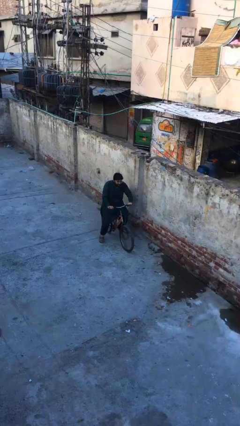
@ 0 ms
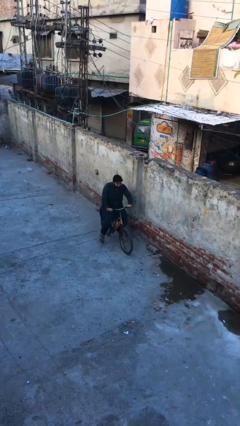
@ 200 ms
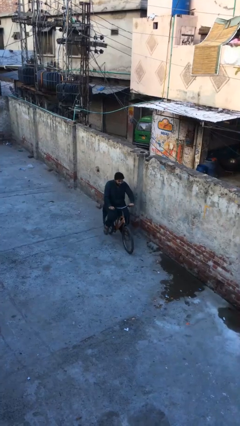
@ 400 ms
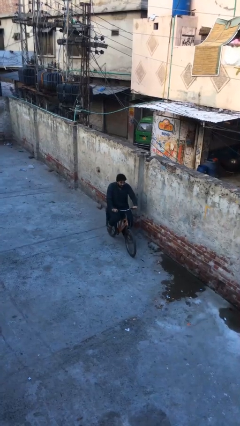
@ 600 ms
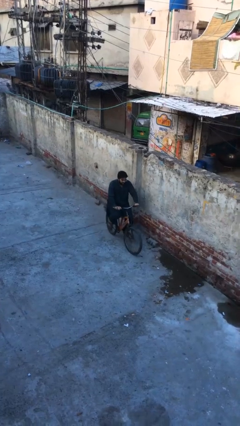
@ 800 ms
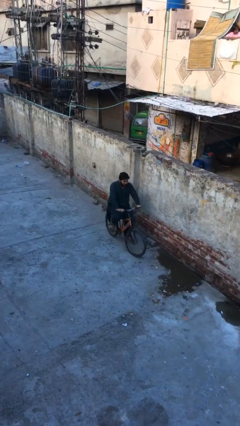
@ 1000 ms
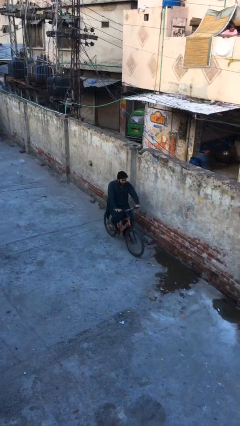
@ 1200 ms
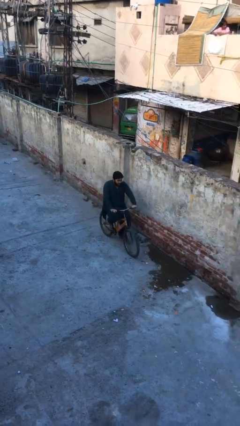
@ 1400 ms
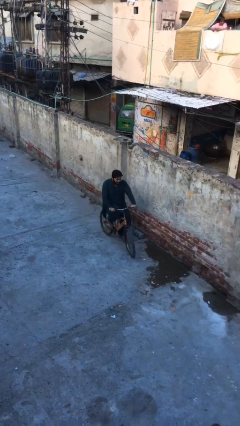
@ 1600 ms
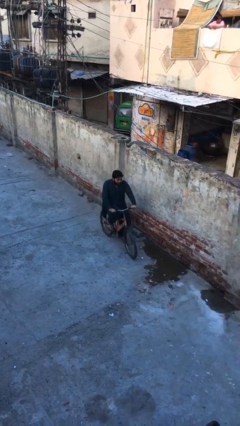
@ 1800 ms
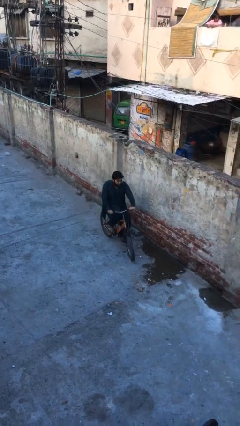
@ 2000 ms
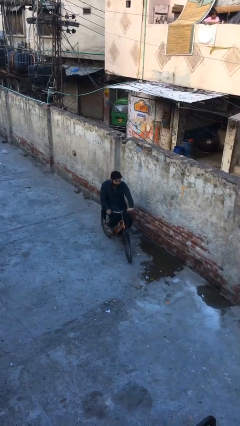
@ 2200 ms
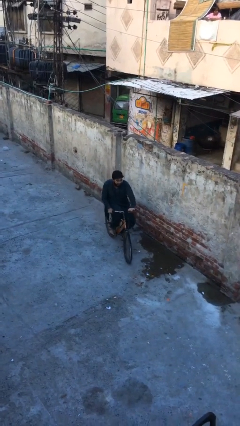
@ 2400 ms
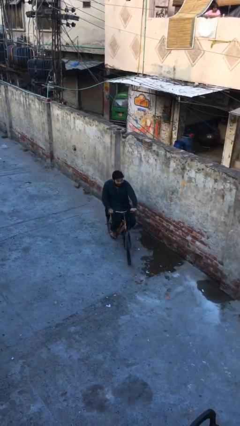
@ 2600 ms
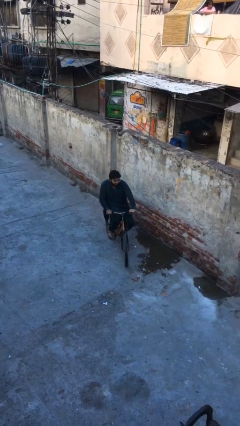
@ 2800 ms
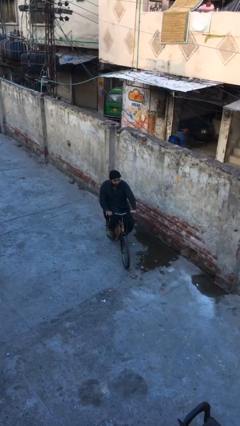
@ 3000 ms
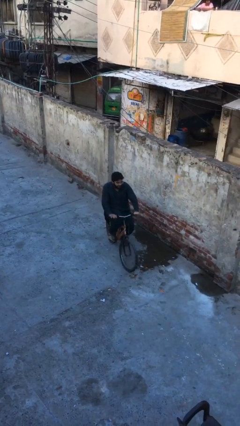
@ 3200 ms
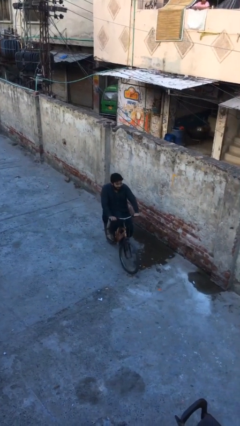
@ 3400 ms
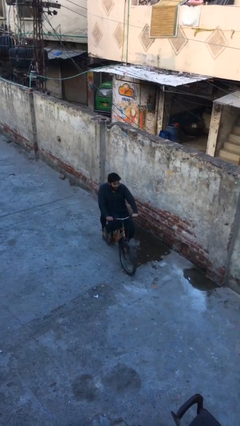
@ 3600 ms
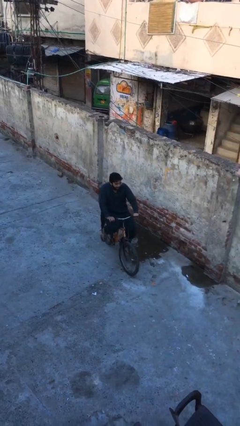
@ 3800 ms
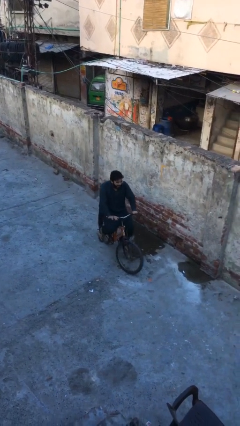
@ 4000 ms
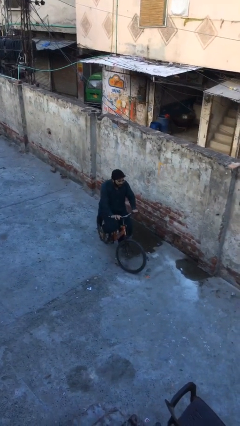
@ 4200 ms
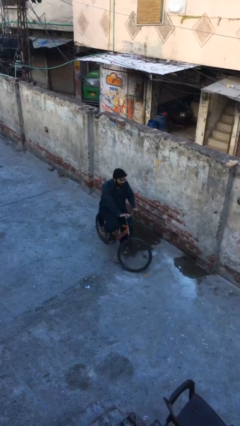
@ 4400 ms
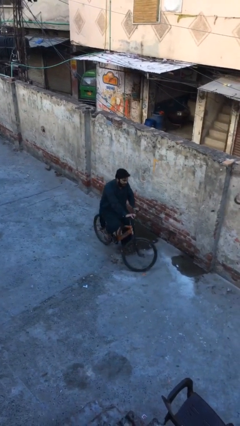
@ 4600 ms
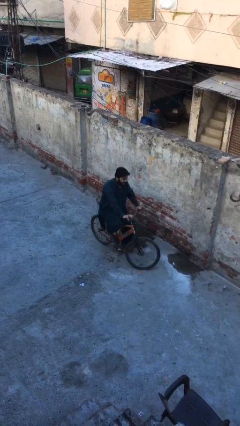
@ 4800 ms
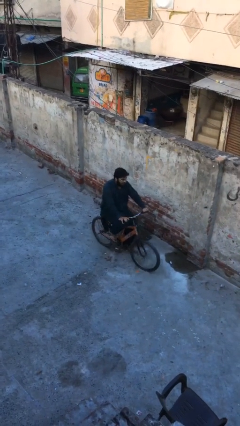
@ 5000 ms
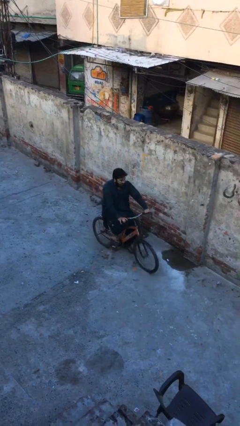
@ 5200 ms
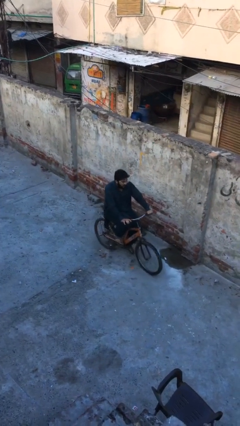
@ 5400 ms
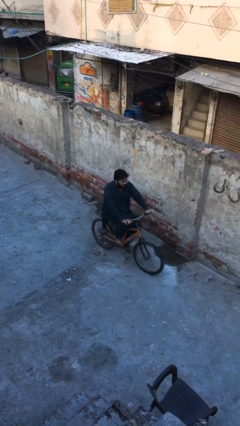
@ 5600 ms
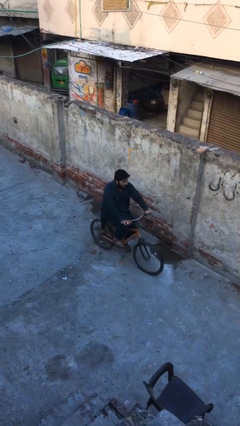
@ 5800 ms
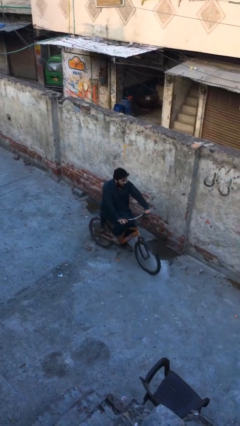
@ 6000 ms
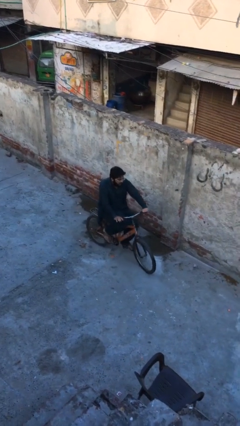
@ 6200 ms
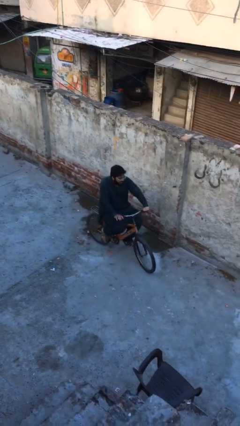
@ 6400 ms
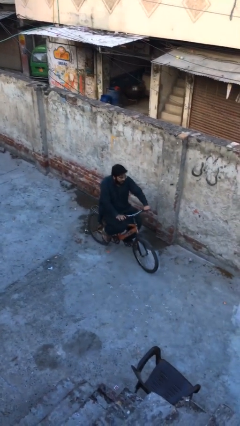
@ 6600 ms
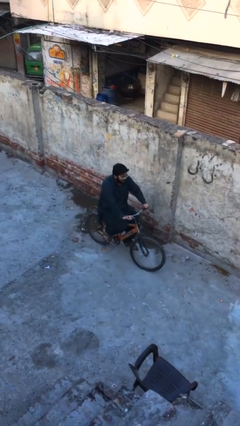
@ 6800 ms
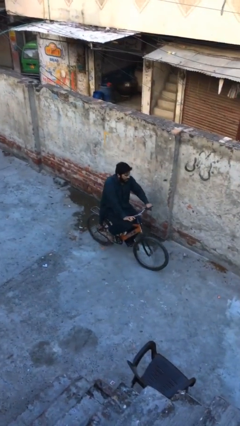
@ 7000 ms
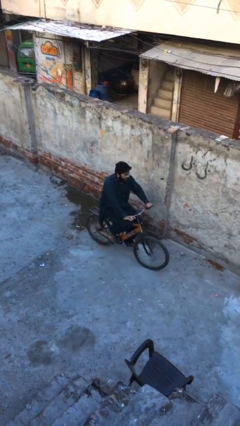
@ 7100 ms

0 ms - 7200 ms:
person rides bicycle

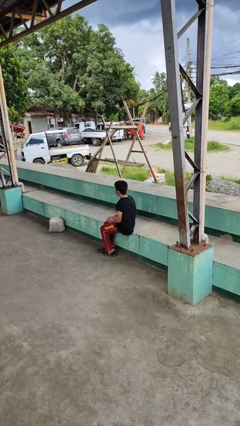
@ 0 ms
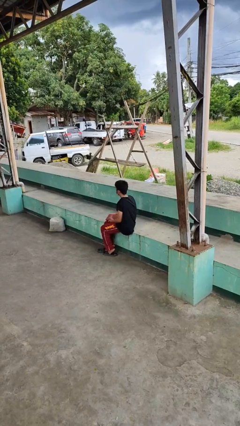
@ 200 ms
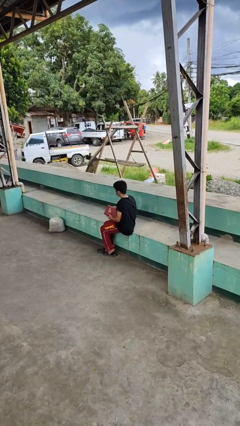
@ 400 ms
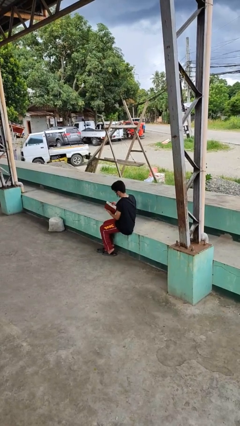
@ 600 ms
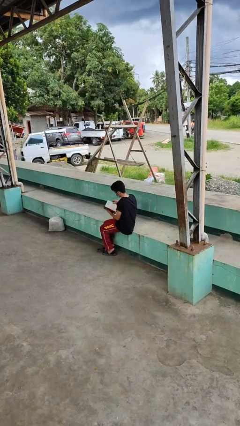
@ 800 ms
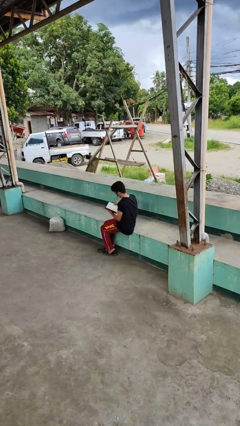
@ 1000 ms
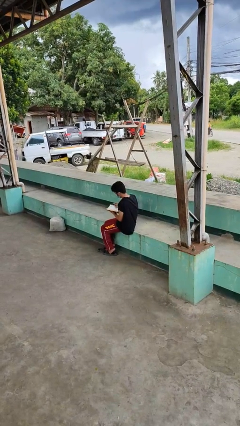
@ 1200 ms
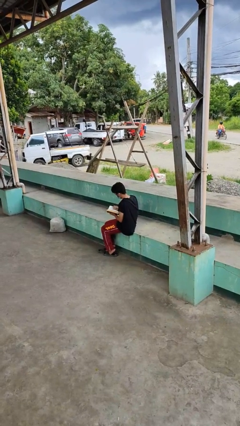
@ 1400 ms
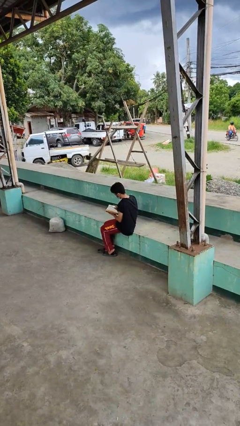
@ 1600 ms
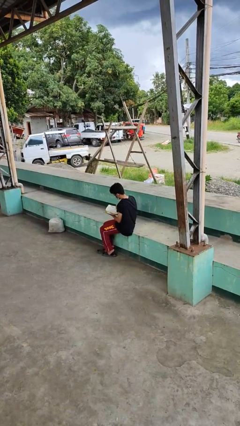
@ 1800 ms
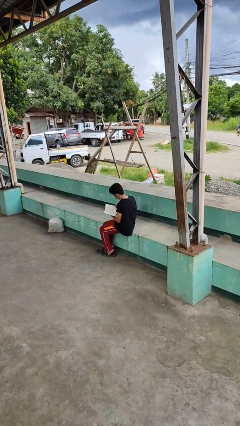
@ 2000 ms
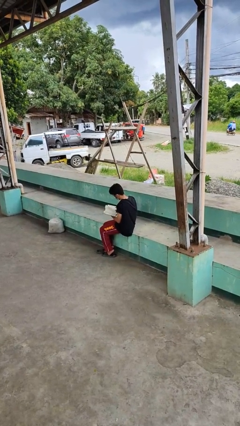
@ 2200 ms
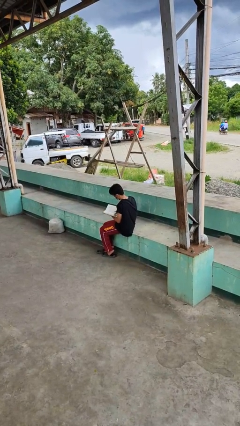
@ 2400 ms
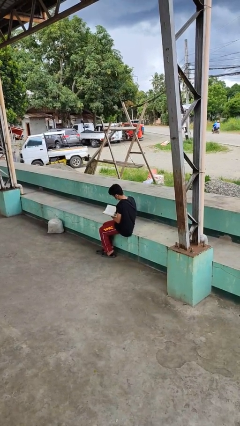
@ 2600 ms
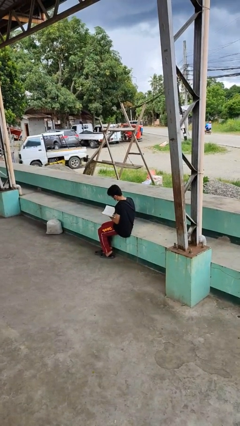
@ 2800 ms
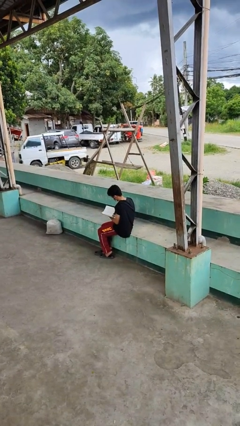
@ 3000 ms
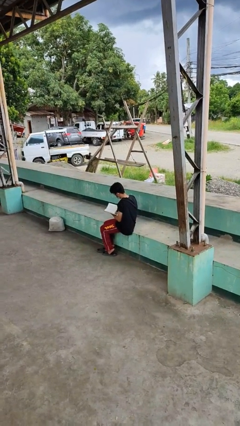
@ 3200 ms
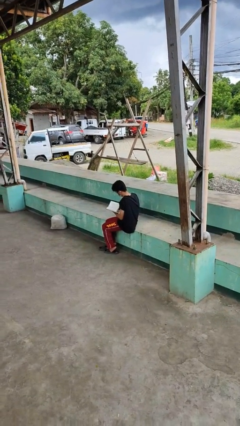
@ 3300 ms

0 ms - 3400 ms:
person reads book

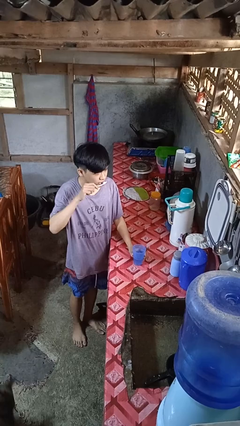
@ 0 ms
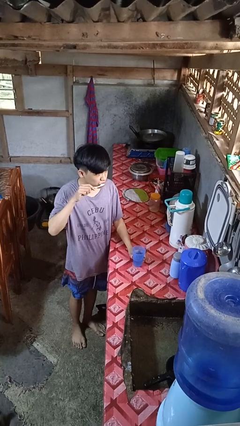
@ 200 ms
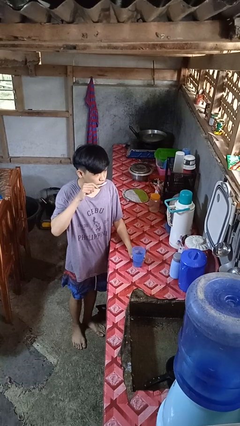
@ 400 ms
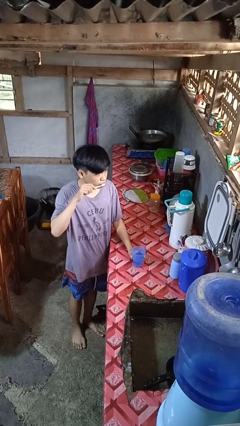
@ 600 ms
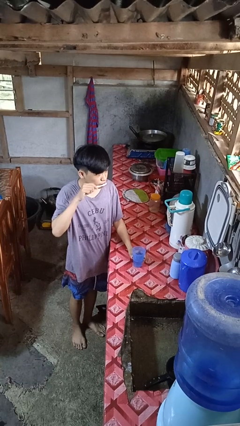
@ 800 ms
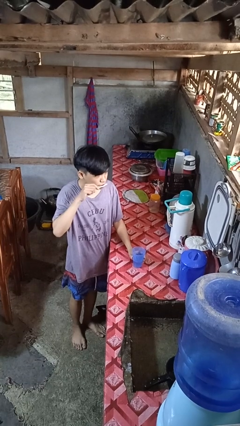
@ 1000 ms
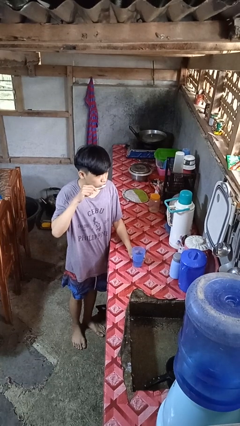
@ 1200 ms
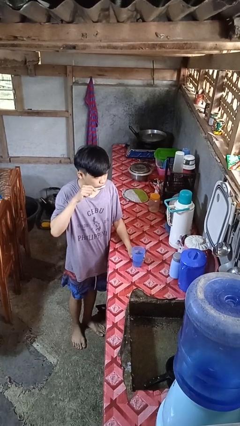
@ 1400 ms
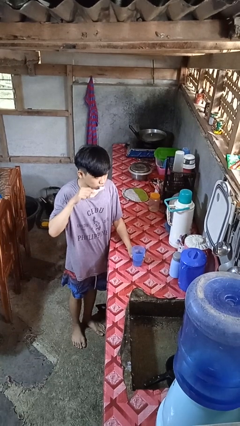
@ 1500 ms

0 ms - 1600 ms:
person brushes teeth

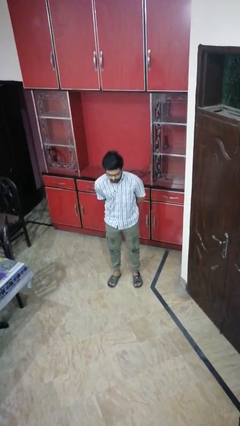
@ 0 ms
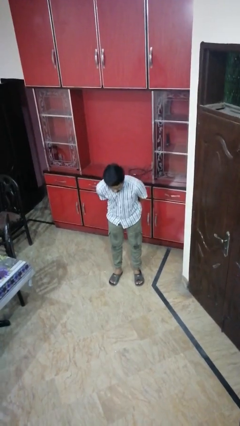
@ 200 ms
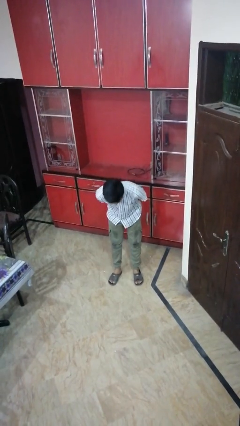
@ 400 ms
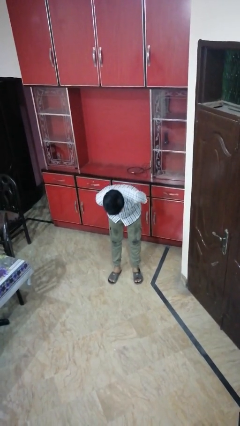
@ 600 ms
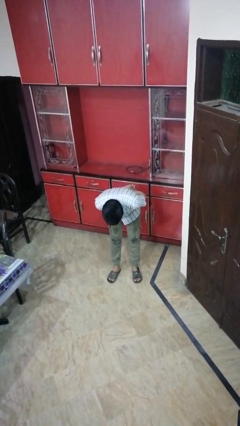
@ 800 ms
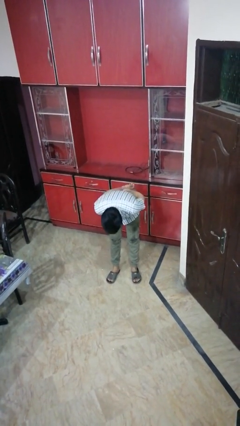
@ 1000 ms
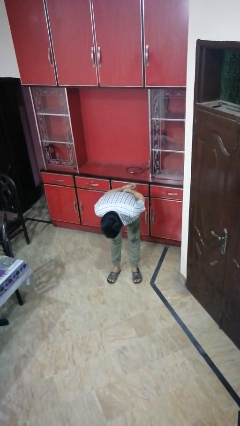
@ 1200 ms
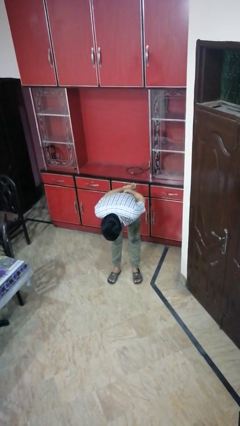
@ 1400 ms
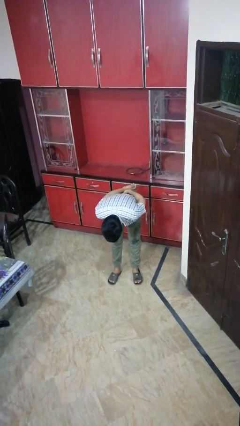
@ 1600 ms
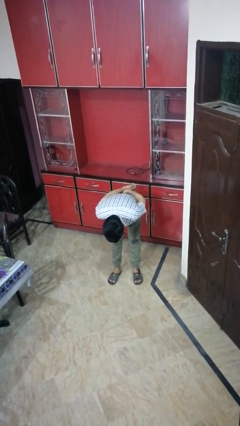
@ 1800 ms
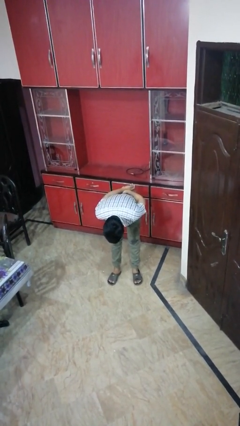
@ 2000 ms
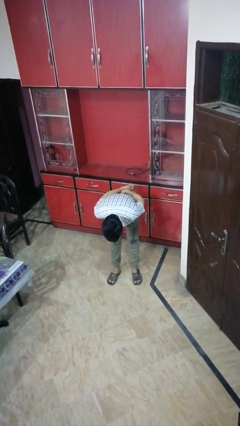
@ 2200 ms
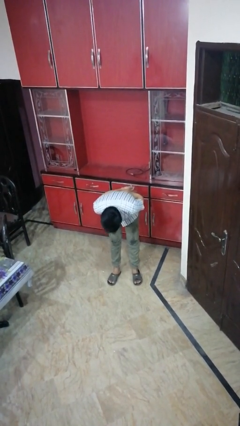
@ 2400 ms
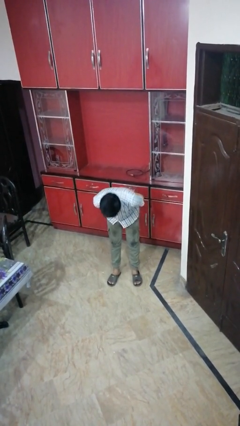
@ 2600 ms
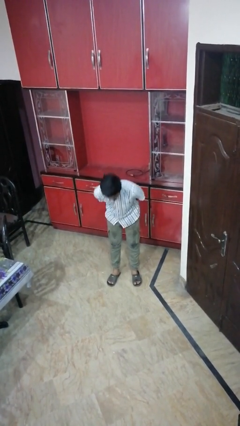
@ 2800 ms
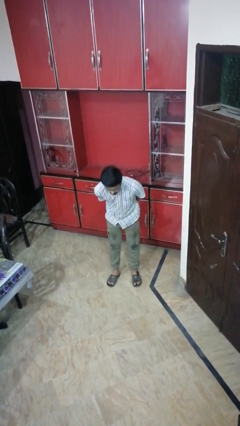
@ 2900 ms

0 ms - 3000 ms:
person bows

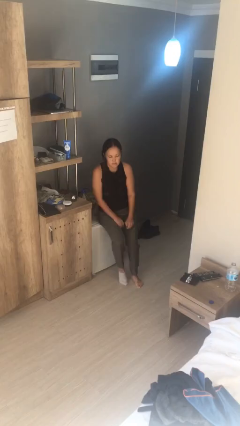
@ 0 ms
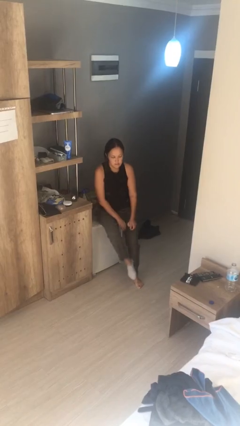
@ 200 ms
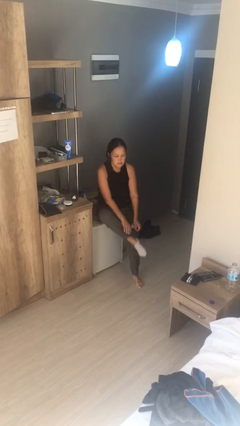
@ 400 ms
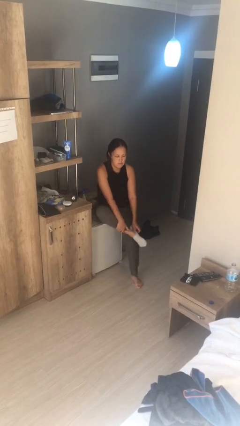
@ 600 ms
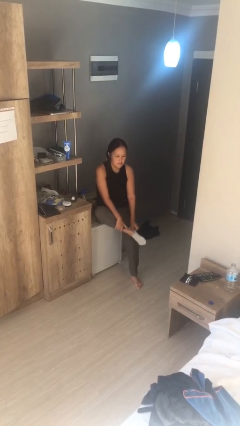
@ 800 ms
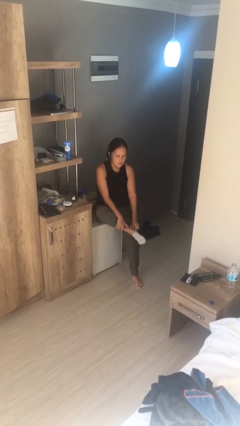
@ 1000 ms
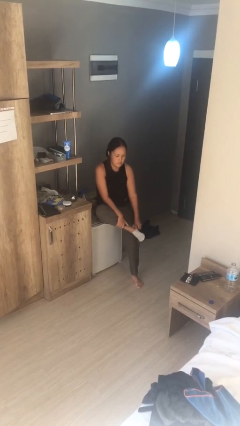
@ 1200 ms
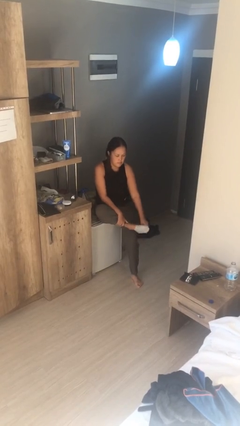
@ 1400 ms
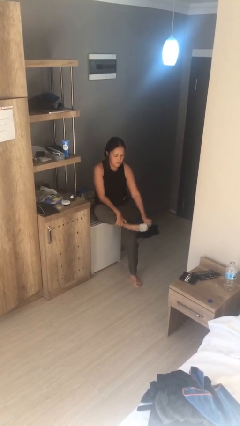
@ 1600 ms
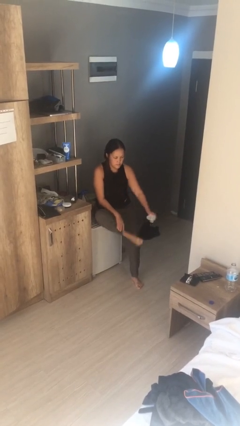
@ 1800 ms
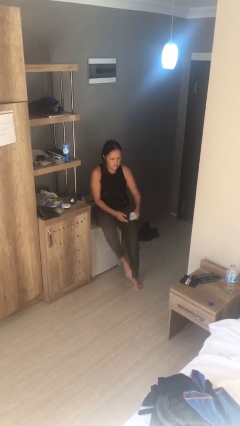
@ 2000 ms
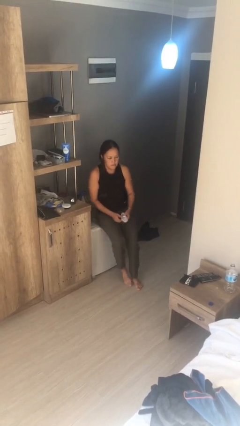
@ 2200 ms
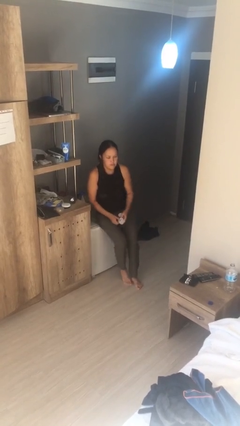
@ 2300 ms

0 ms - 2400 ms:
person takes off socks
